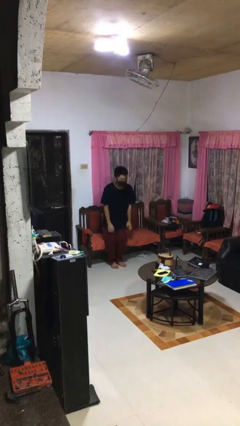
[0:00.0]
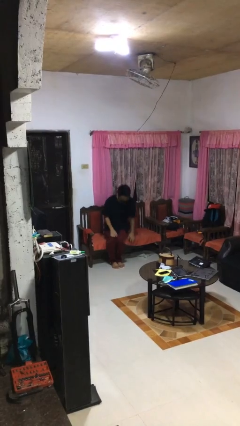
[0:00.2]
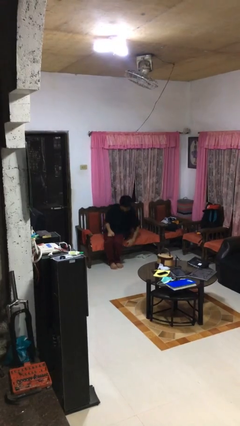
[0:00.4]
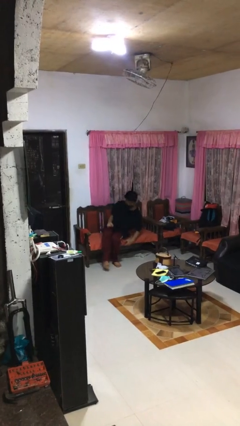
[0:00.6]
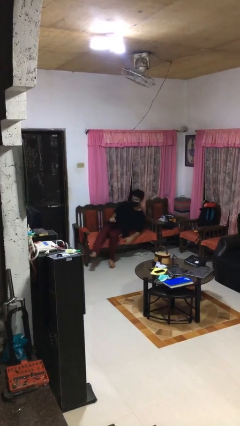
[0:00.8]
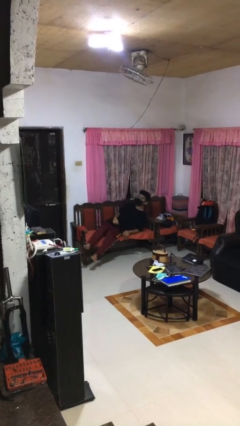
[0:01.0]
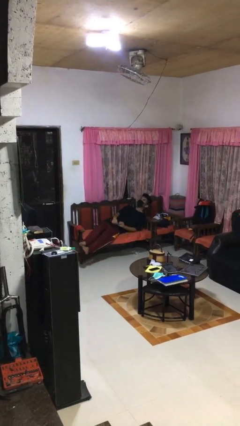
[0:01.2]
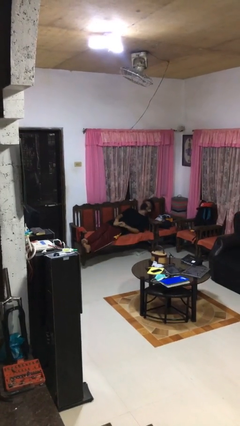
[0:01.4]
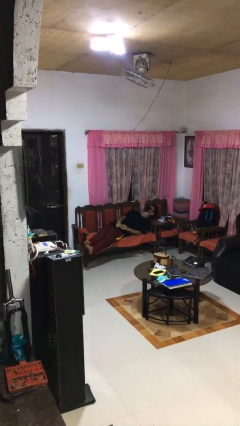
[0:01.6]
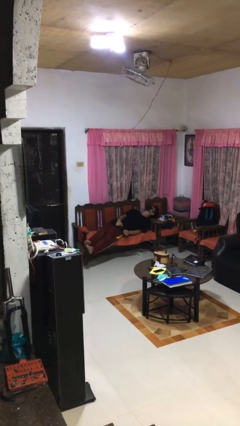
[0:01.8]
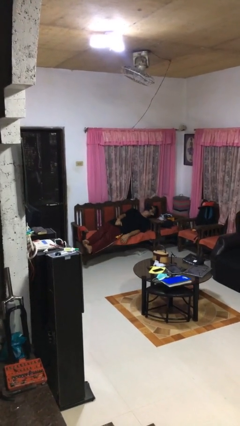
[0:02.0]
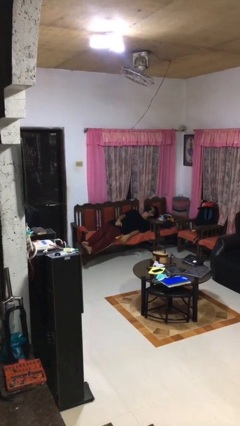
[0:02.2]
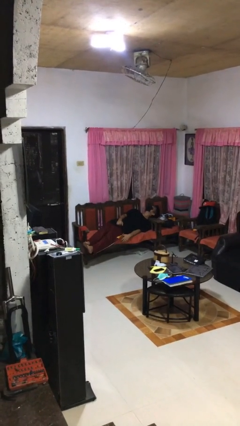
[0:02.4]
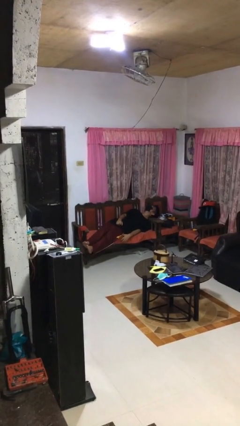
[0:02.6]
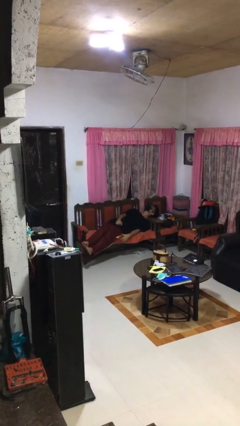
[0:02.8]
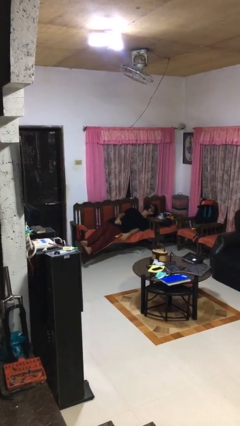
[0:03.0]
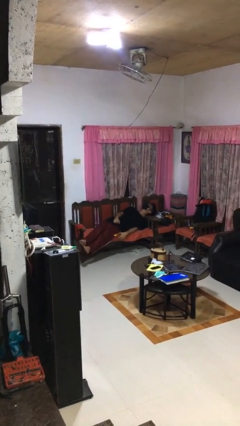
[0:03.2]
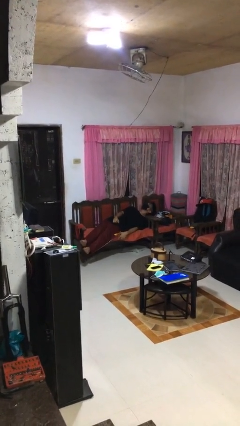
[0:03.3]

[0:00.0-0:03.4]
person lies down on couch

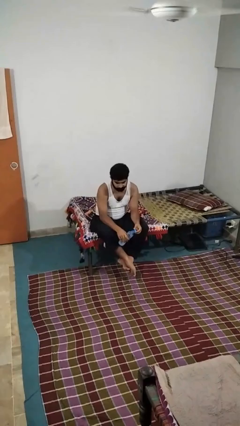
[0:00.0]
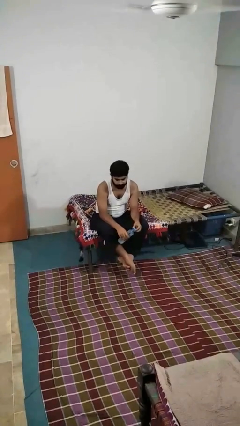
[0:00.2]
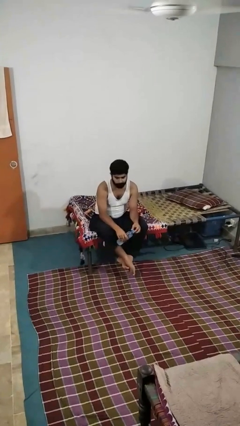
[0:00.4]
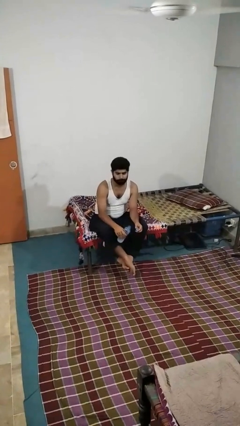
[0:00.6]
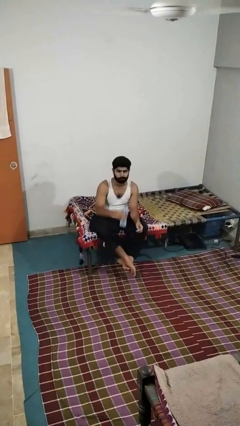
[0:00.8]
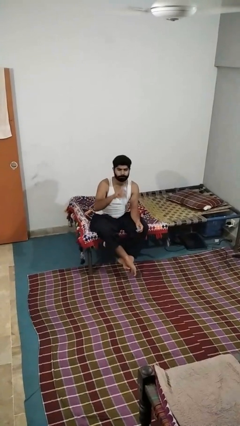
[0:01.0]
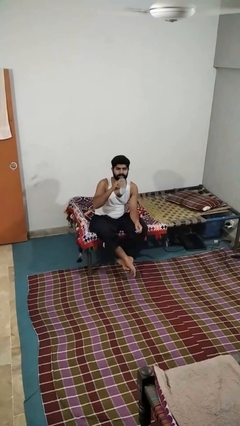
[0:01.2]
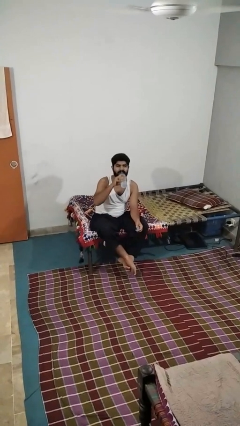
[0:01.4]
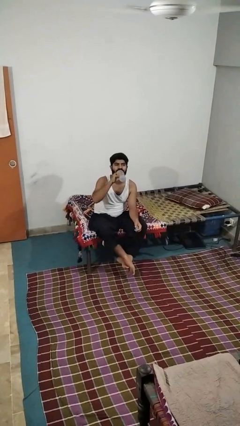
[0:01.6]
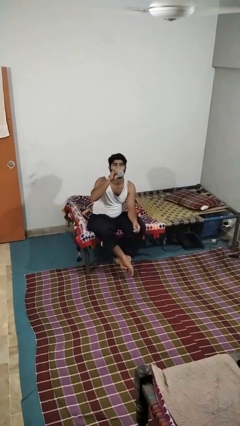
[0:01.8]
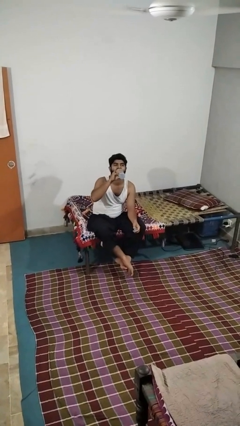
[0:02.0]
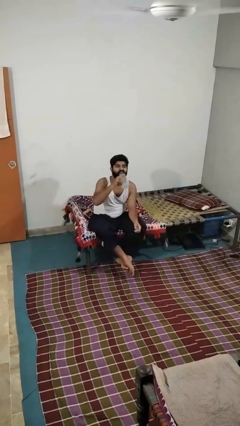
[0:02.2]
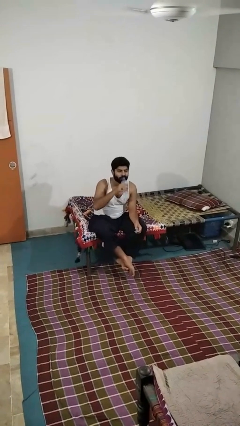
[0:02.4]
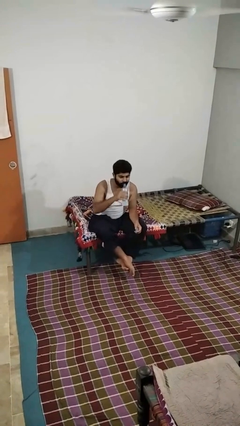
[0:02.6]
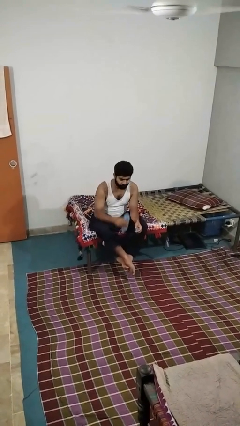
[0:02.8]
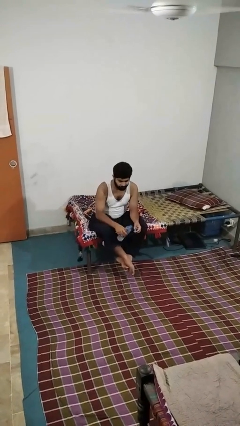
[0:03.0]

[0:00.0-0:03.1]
person drinks from bottle

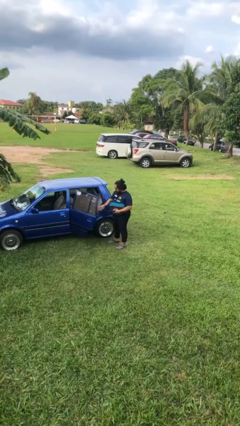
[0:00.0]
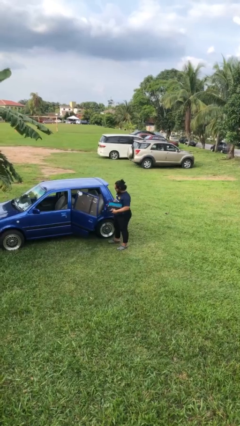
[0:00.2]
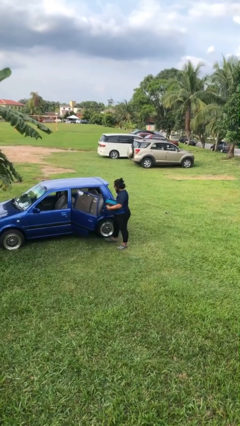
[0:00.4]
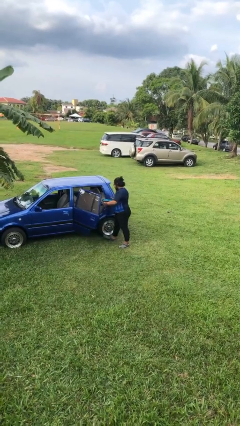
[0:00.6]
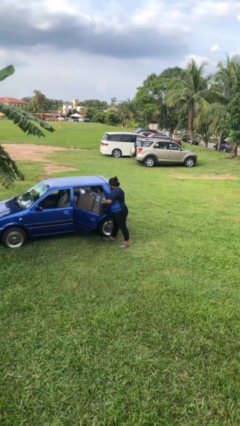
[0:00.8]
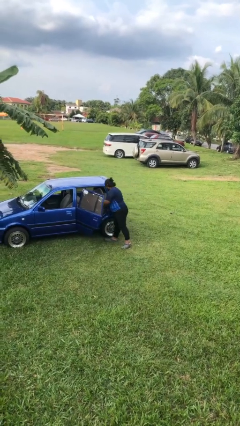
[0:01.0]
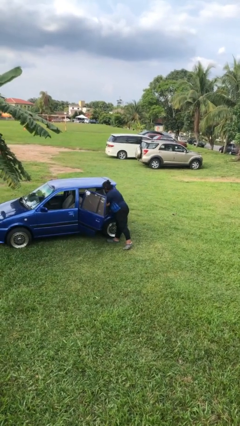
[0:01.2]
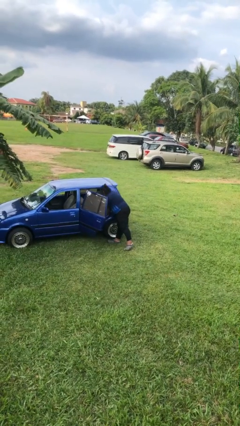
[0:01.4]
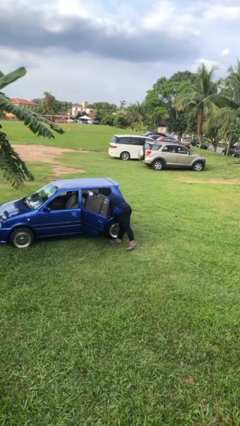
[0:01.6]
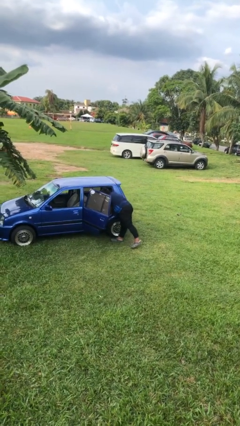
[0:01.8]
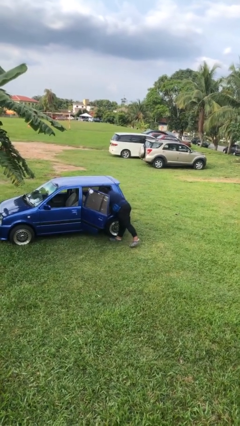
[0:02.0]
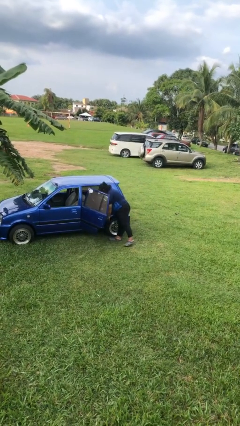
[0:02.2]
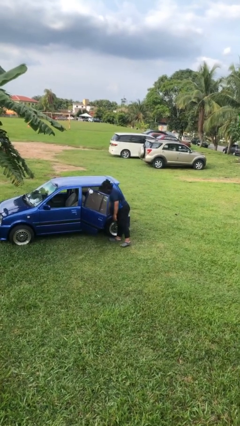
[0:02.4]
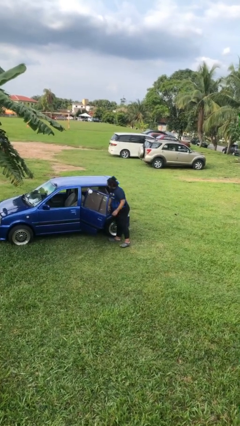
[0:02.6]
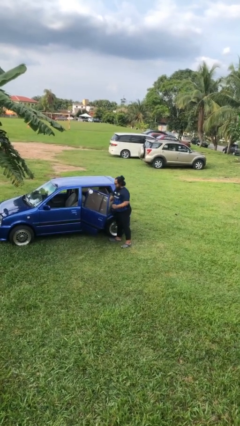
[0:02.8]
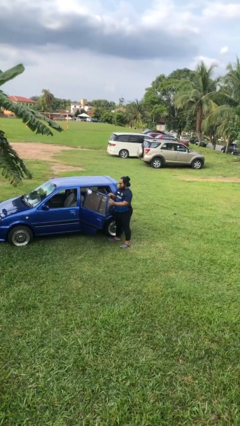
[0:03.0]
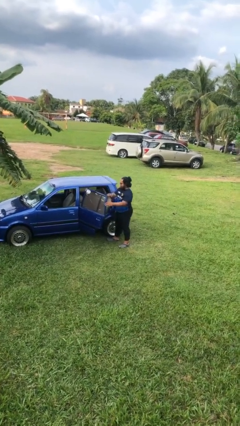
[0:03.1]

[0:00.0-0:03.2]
person loads car

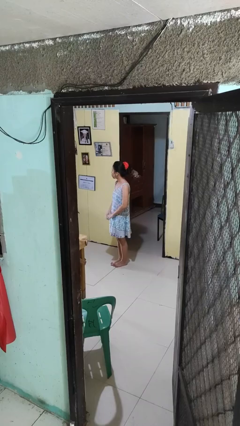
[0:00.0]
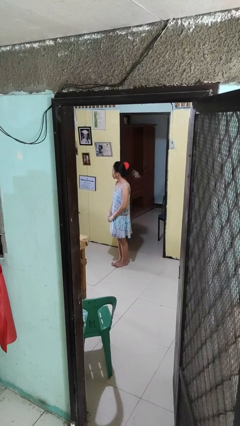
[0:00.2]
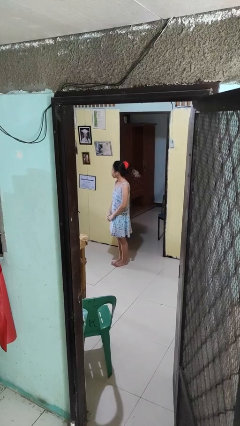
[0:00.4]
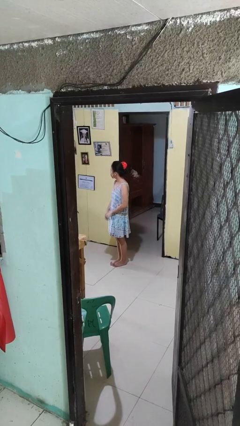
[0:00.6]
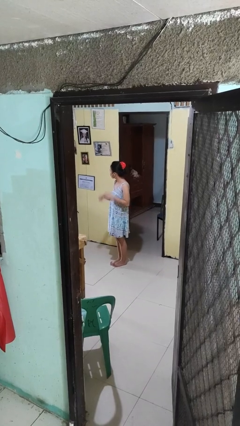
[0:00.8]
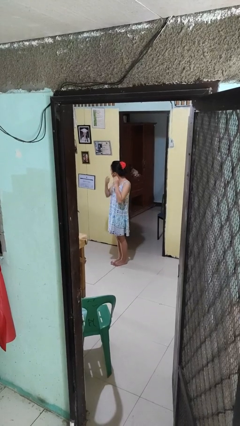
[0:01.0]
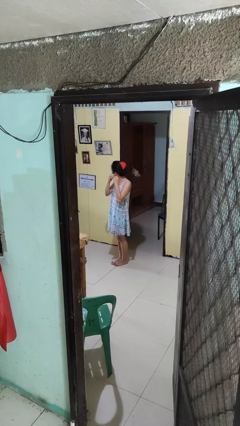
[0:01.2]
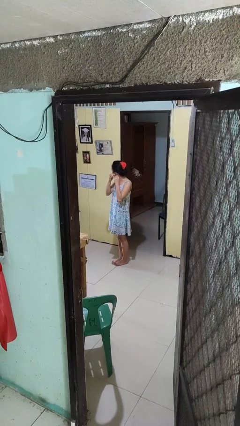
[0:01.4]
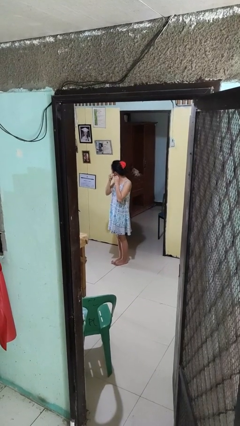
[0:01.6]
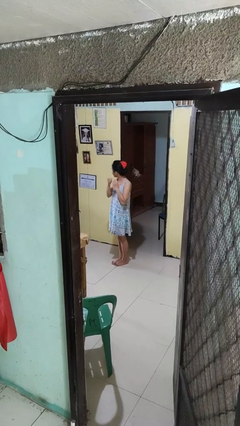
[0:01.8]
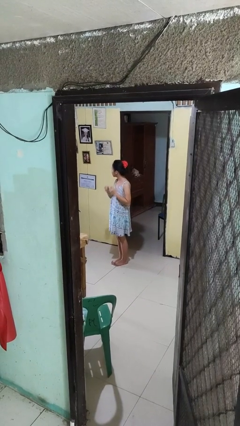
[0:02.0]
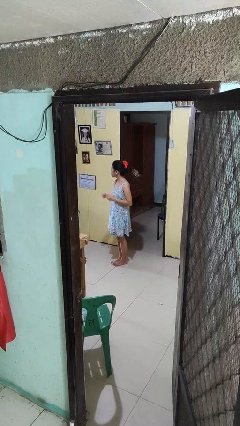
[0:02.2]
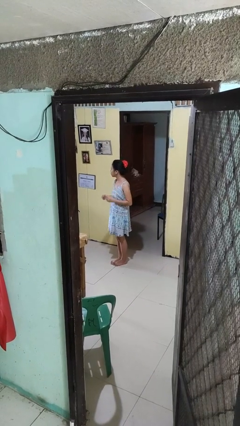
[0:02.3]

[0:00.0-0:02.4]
person takes off earrings

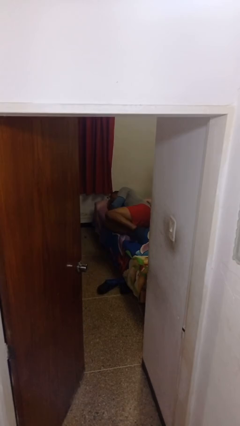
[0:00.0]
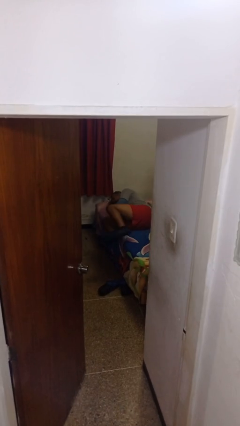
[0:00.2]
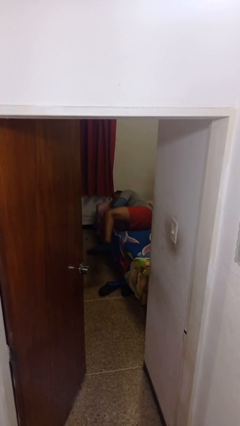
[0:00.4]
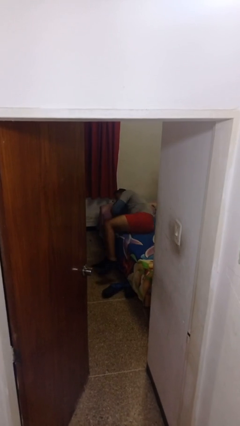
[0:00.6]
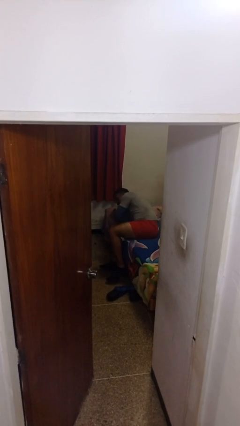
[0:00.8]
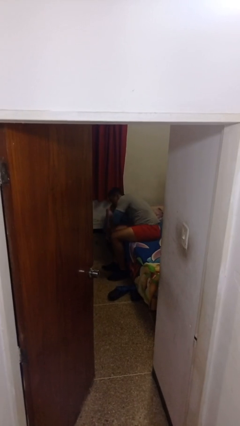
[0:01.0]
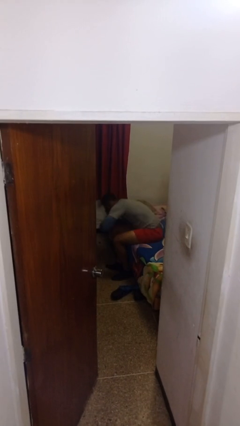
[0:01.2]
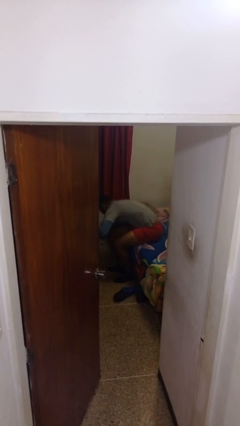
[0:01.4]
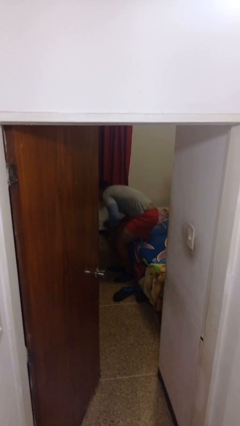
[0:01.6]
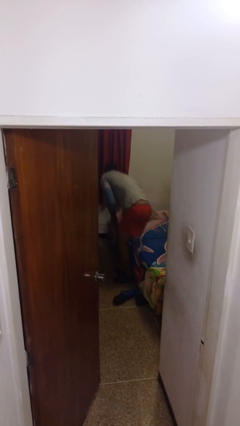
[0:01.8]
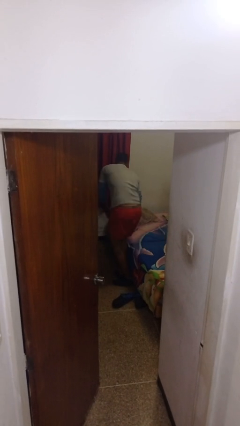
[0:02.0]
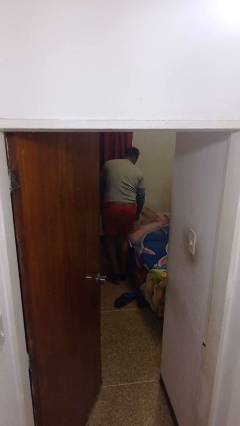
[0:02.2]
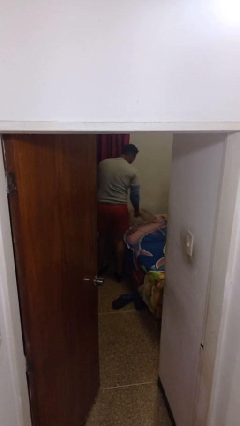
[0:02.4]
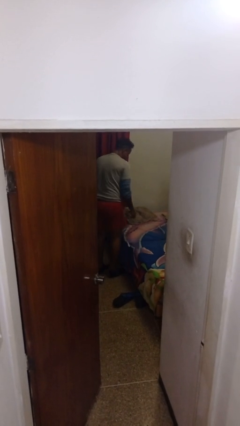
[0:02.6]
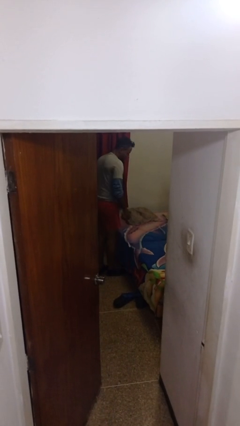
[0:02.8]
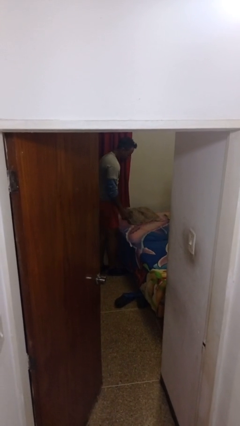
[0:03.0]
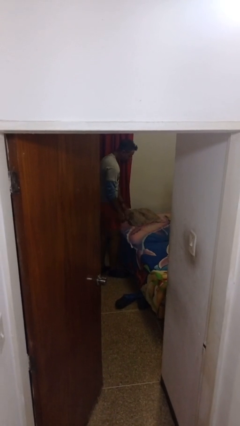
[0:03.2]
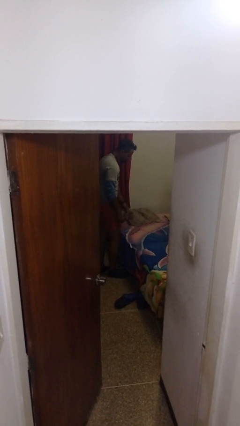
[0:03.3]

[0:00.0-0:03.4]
person stands up

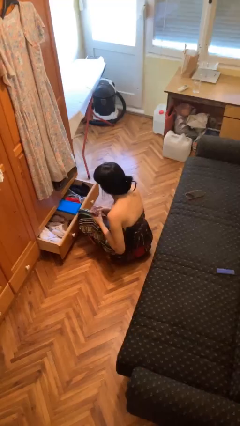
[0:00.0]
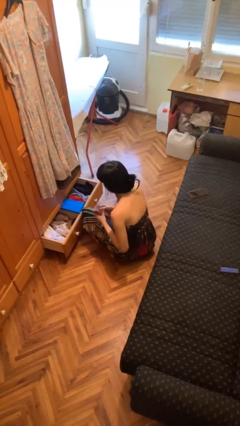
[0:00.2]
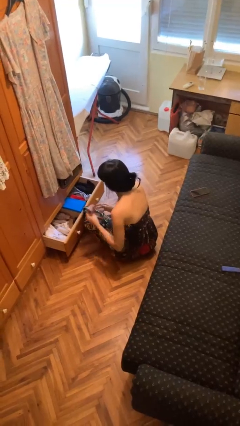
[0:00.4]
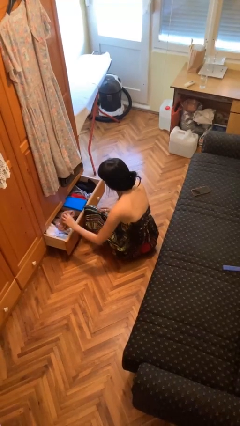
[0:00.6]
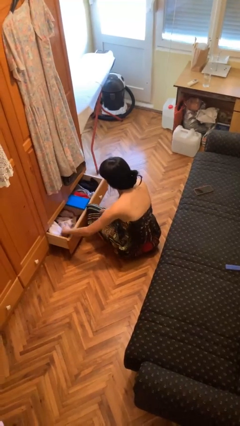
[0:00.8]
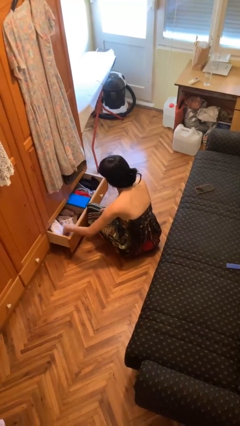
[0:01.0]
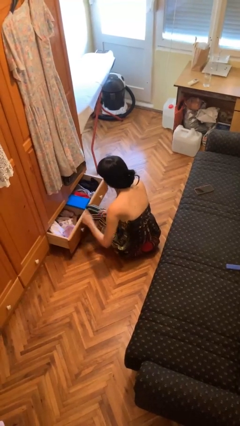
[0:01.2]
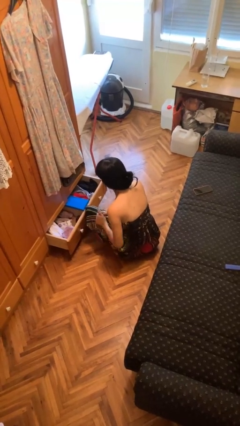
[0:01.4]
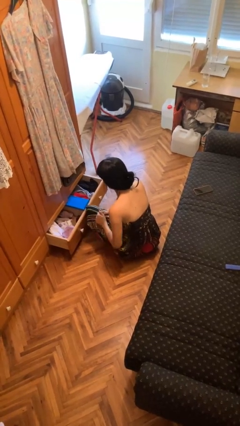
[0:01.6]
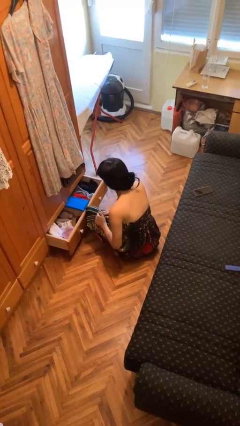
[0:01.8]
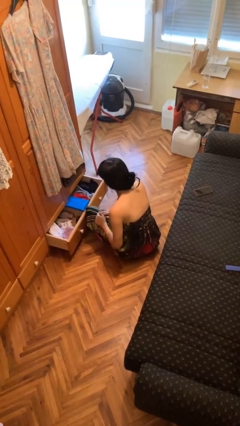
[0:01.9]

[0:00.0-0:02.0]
person puts clothes into dresser
